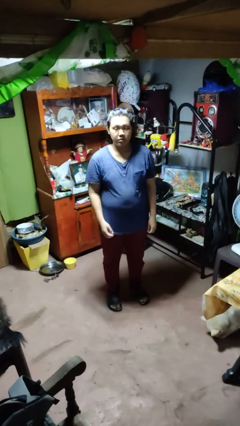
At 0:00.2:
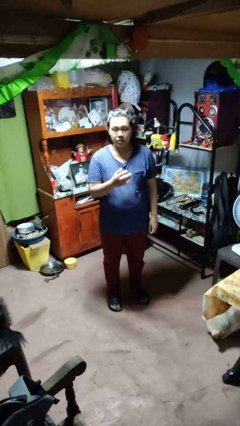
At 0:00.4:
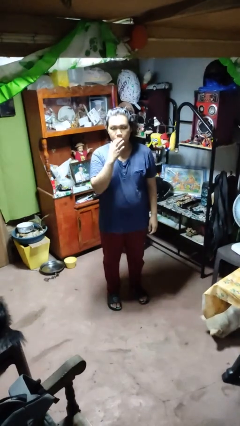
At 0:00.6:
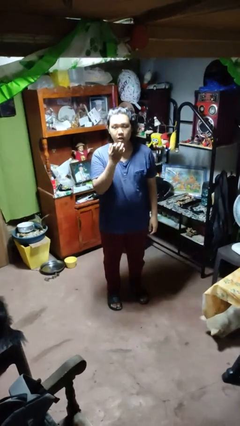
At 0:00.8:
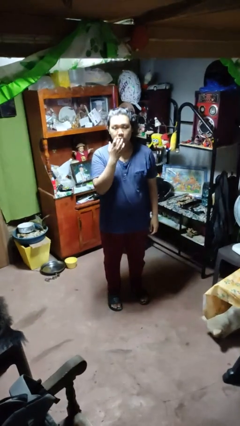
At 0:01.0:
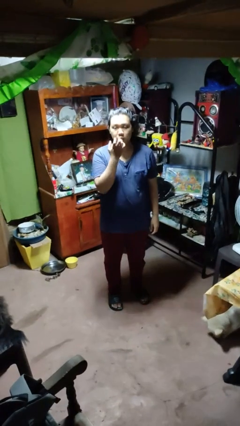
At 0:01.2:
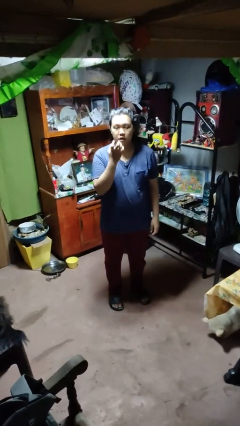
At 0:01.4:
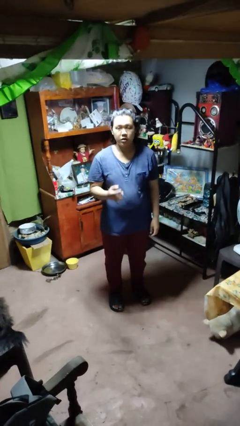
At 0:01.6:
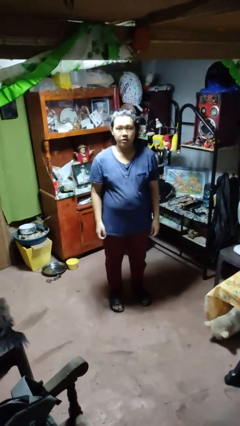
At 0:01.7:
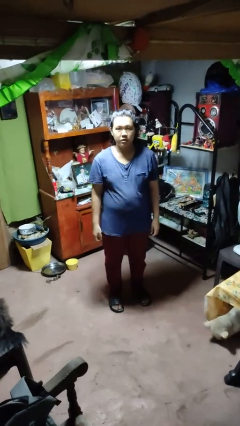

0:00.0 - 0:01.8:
person licks fingers

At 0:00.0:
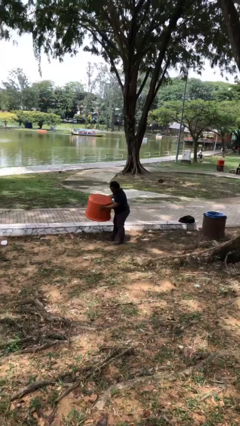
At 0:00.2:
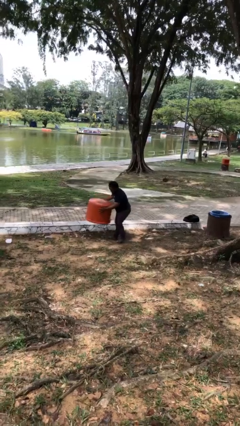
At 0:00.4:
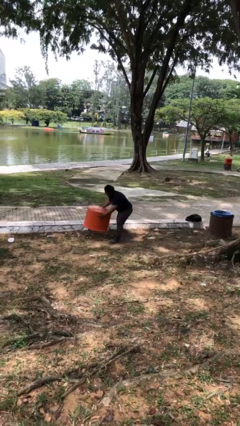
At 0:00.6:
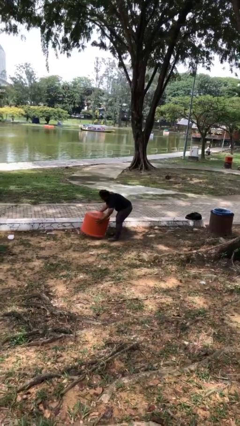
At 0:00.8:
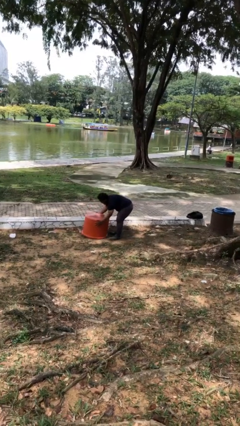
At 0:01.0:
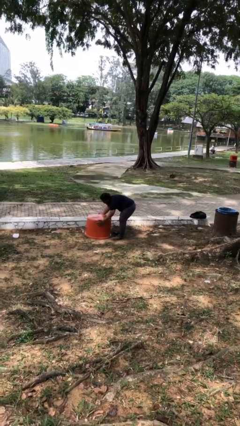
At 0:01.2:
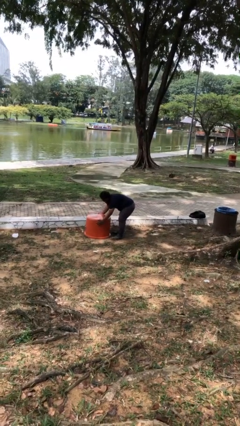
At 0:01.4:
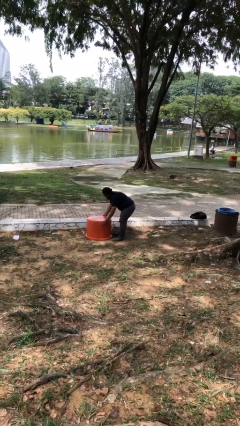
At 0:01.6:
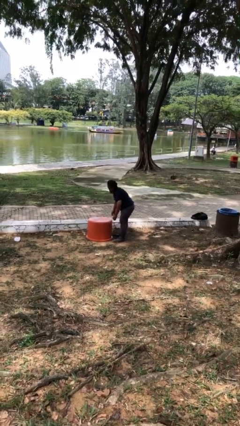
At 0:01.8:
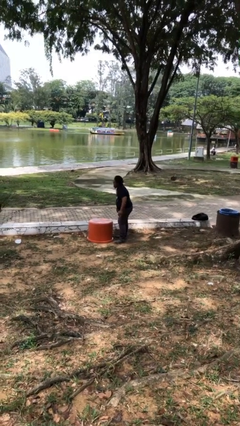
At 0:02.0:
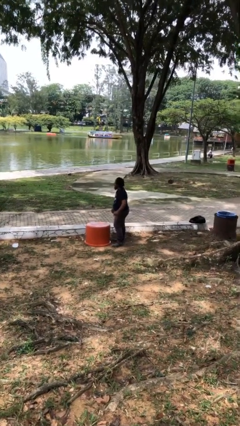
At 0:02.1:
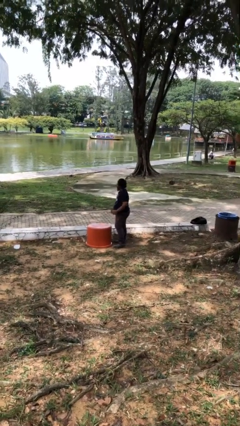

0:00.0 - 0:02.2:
person puts down object on floor

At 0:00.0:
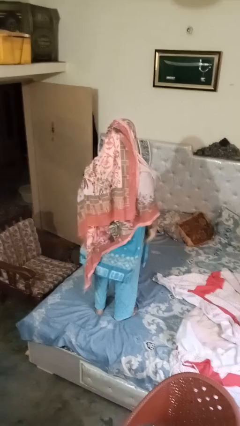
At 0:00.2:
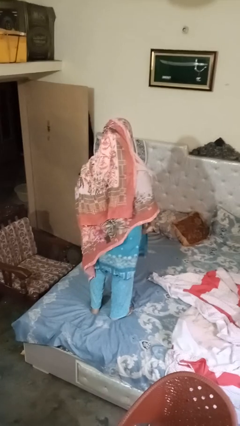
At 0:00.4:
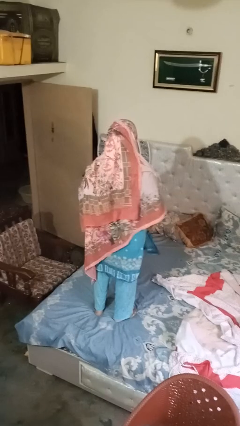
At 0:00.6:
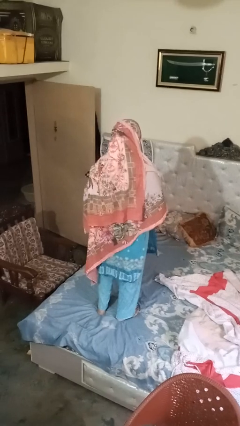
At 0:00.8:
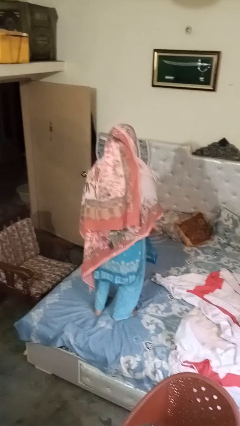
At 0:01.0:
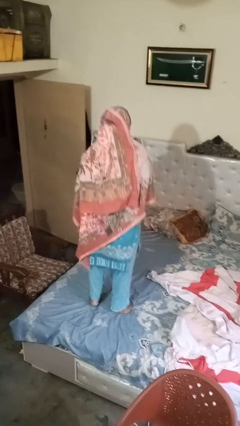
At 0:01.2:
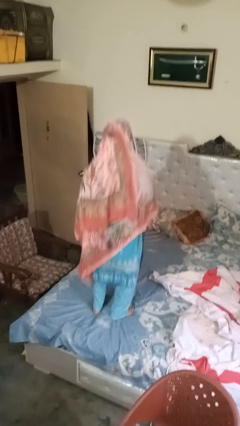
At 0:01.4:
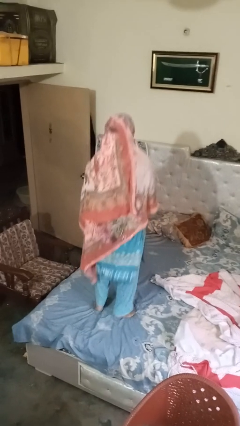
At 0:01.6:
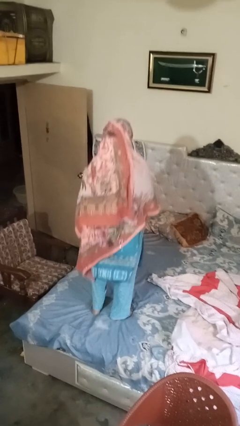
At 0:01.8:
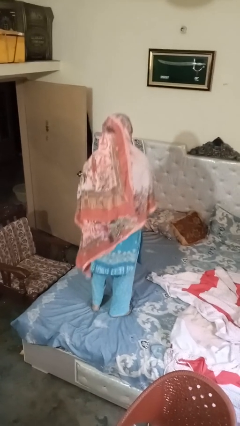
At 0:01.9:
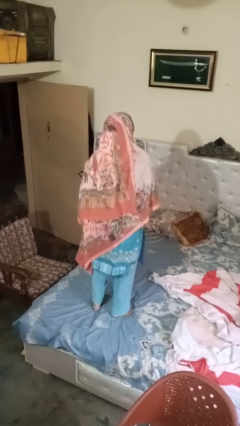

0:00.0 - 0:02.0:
person jumps on bed

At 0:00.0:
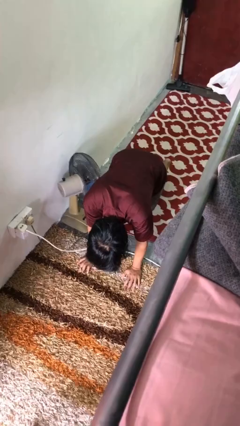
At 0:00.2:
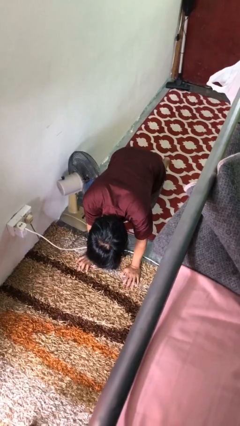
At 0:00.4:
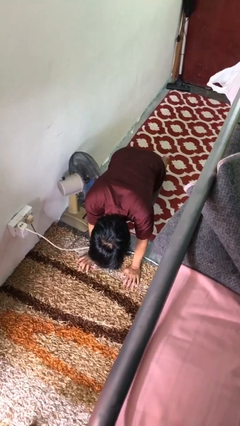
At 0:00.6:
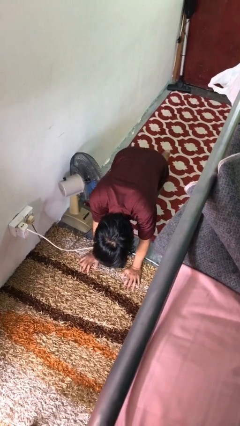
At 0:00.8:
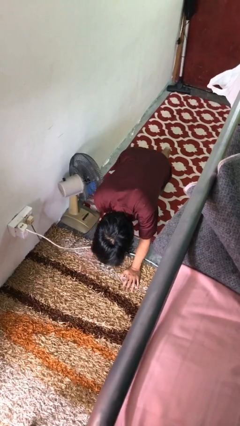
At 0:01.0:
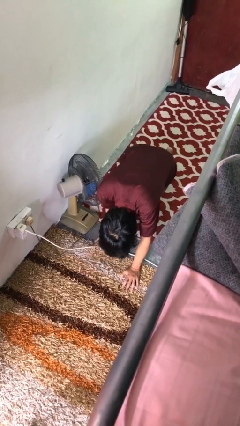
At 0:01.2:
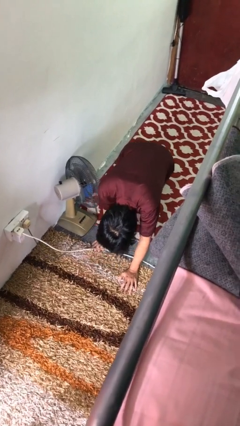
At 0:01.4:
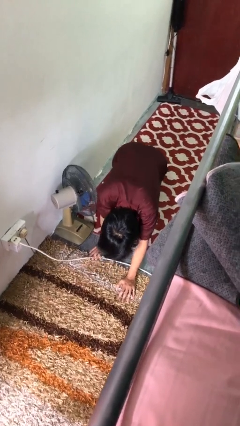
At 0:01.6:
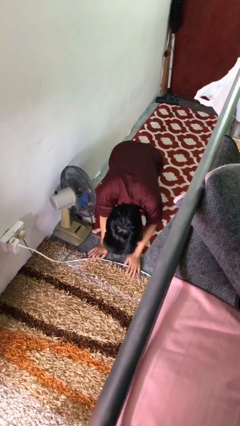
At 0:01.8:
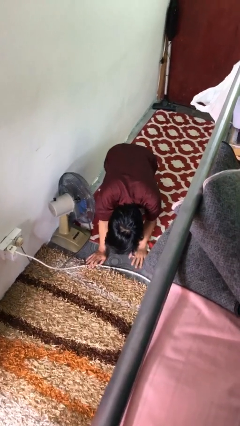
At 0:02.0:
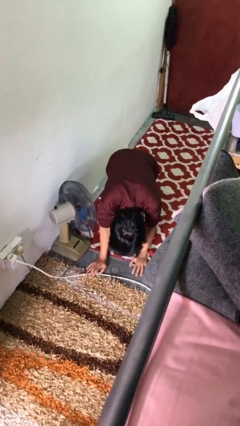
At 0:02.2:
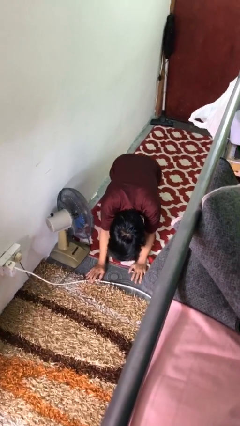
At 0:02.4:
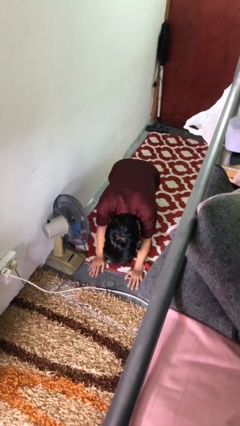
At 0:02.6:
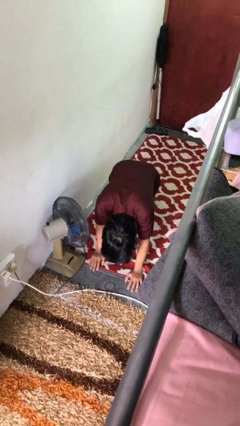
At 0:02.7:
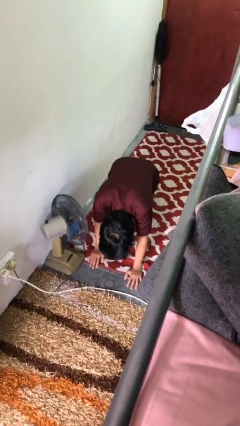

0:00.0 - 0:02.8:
person crawls

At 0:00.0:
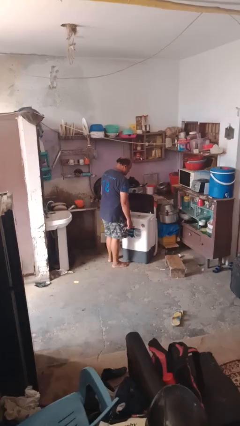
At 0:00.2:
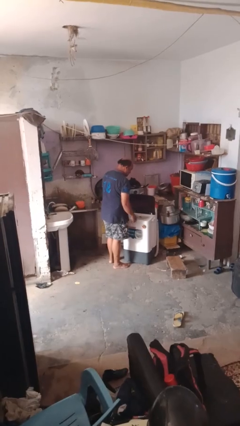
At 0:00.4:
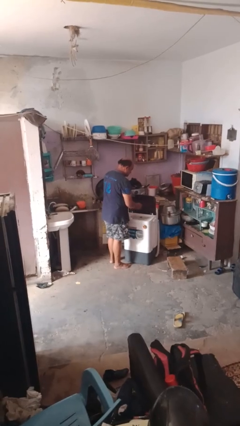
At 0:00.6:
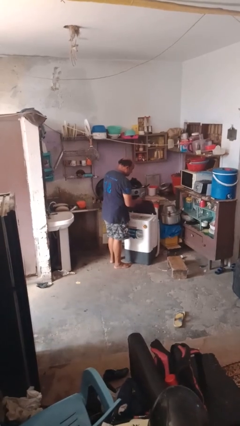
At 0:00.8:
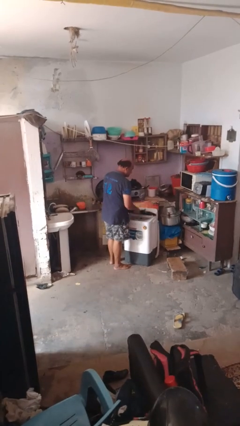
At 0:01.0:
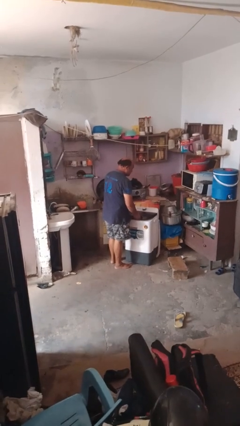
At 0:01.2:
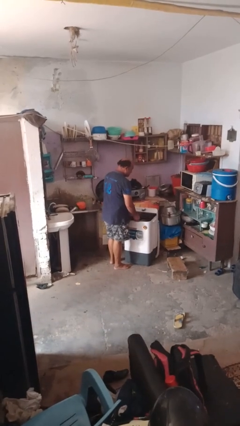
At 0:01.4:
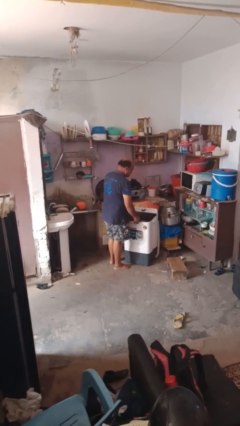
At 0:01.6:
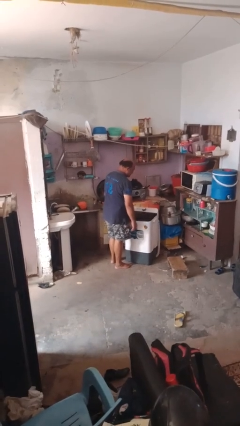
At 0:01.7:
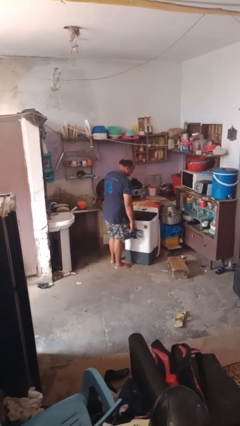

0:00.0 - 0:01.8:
person closes clothes washer

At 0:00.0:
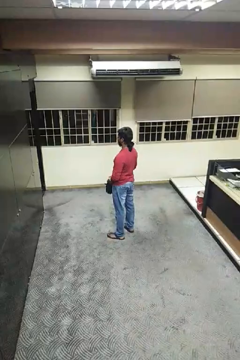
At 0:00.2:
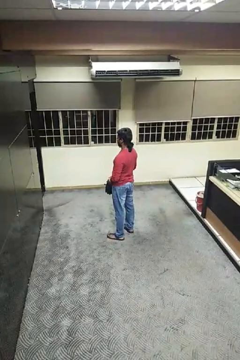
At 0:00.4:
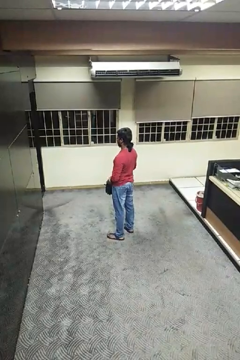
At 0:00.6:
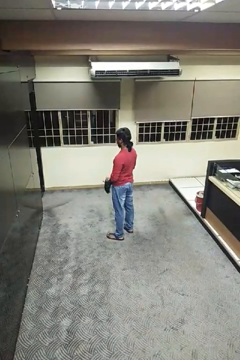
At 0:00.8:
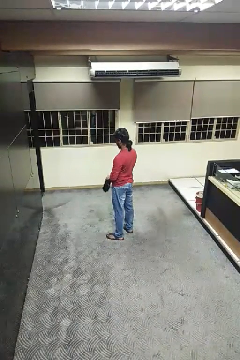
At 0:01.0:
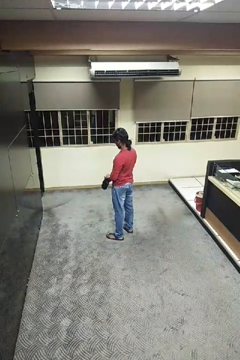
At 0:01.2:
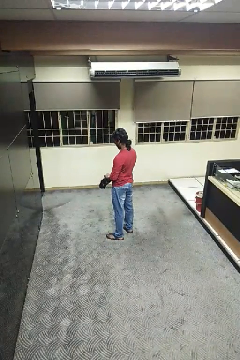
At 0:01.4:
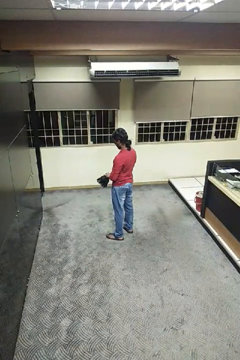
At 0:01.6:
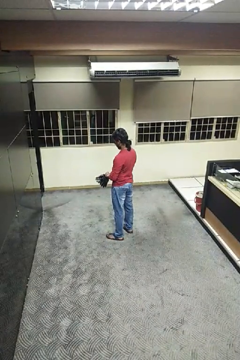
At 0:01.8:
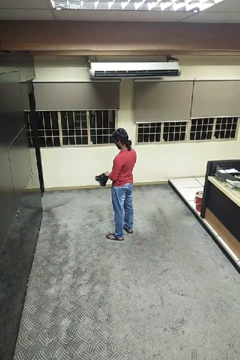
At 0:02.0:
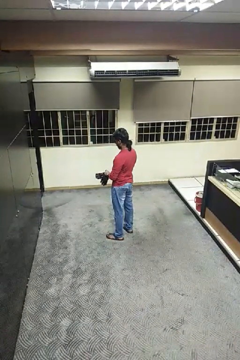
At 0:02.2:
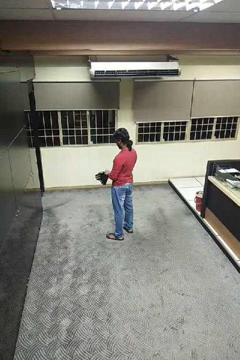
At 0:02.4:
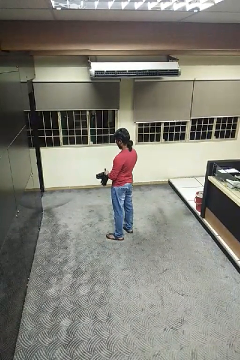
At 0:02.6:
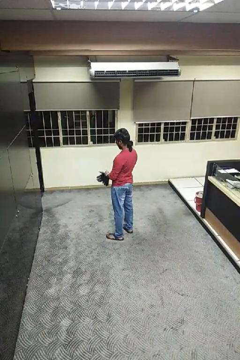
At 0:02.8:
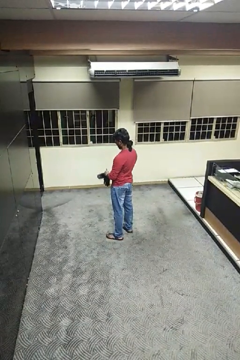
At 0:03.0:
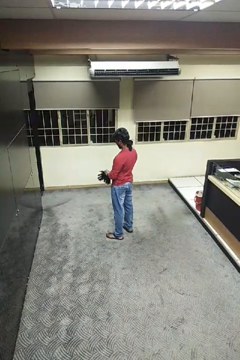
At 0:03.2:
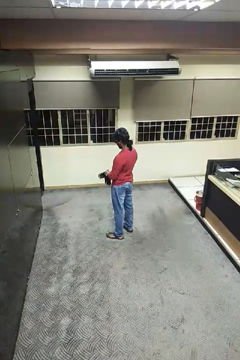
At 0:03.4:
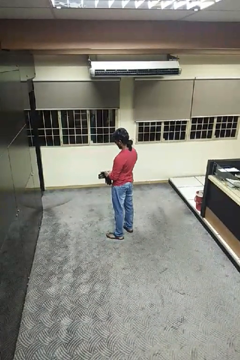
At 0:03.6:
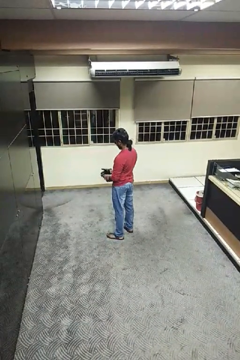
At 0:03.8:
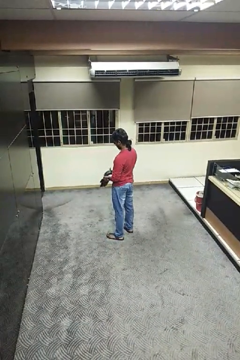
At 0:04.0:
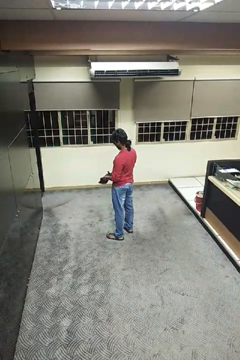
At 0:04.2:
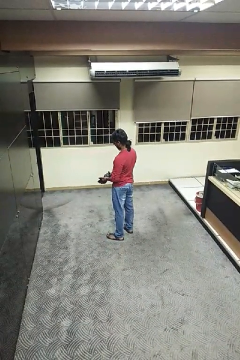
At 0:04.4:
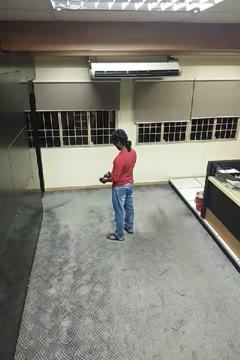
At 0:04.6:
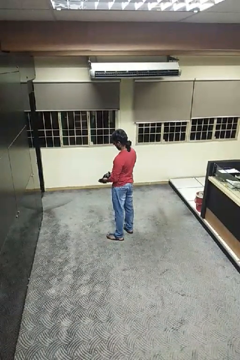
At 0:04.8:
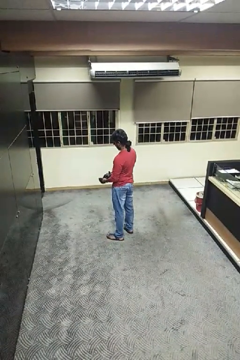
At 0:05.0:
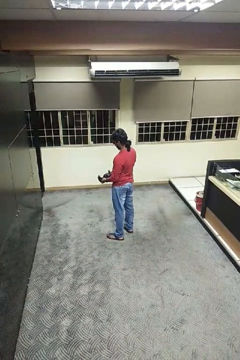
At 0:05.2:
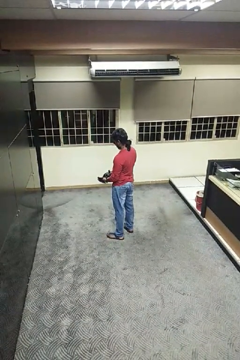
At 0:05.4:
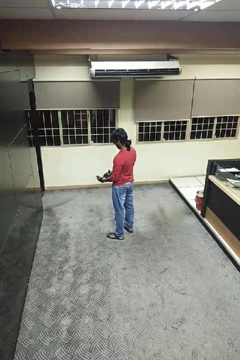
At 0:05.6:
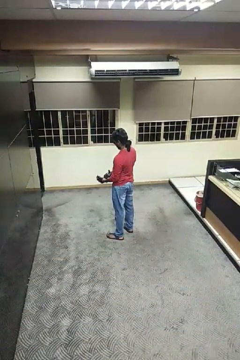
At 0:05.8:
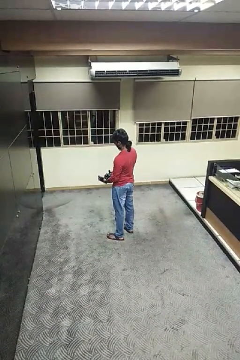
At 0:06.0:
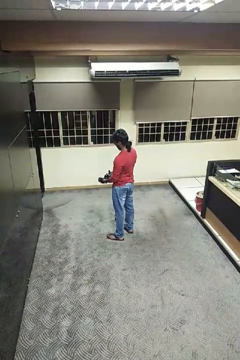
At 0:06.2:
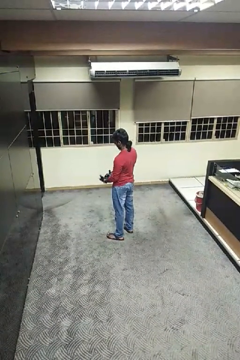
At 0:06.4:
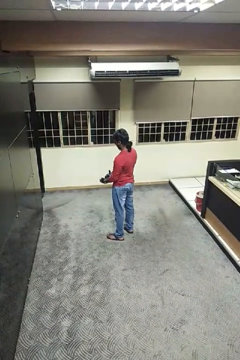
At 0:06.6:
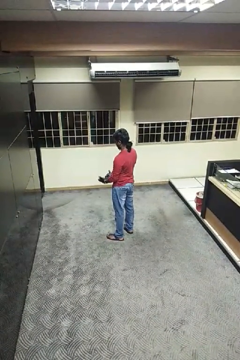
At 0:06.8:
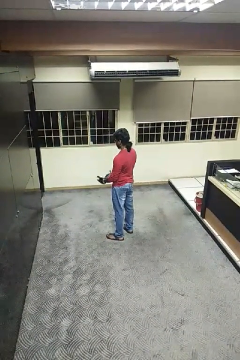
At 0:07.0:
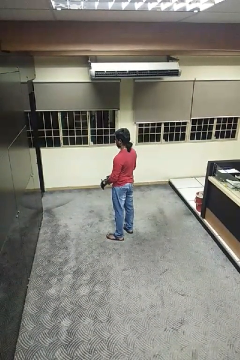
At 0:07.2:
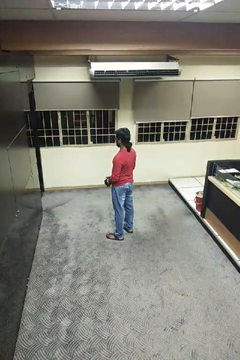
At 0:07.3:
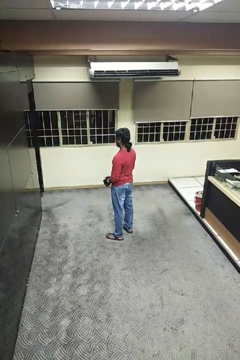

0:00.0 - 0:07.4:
person puts on gloves

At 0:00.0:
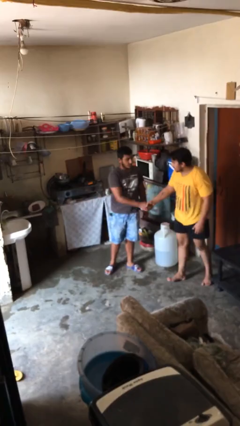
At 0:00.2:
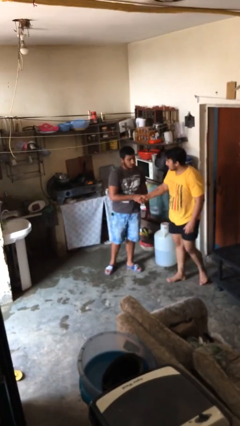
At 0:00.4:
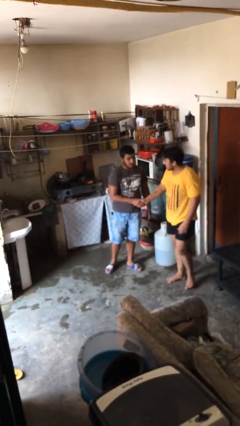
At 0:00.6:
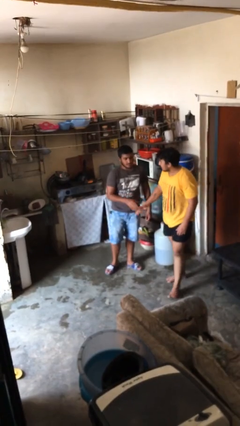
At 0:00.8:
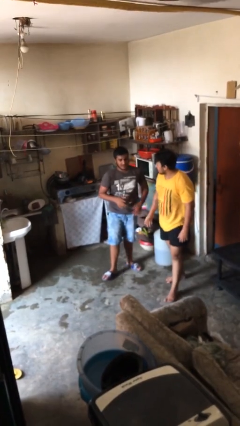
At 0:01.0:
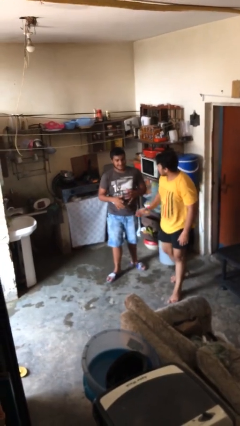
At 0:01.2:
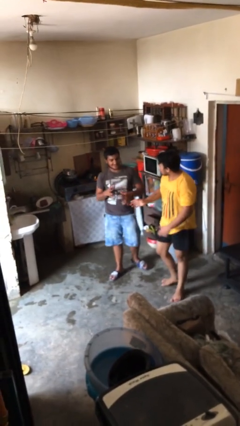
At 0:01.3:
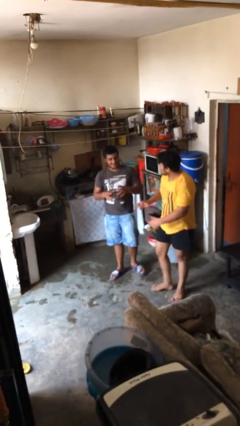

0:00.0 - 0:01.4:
person shakes hand
